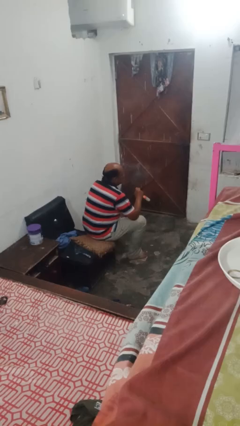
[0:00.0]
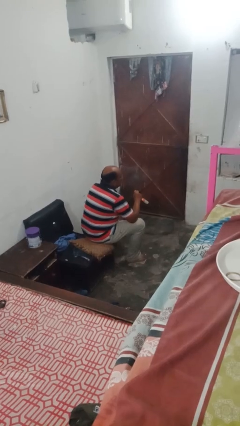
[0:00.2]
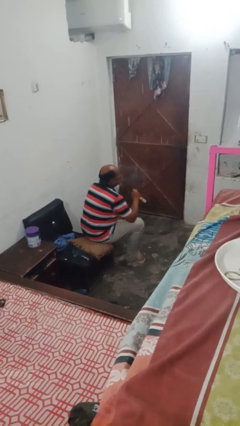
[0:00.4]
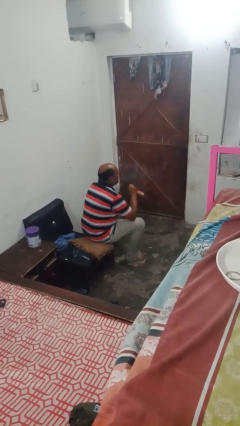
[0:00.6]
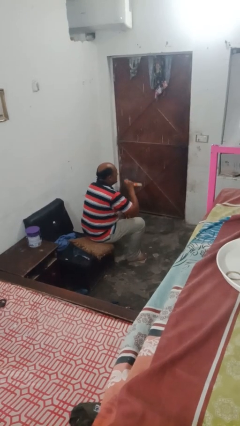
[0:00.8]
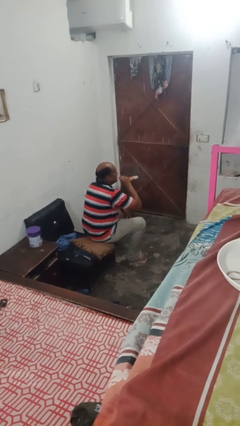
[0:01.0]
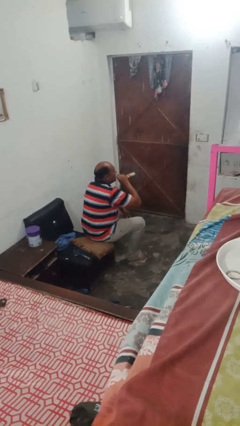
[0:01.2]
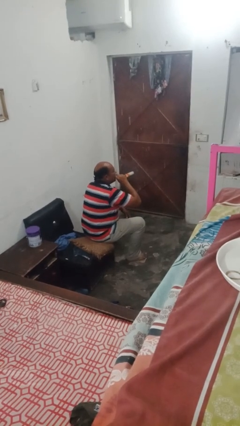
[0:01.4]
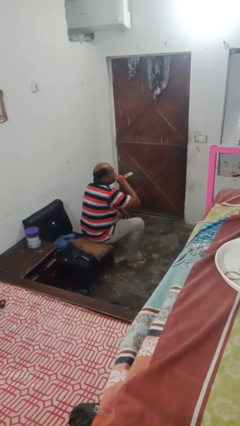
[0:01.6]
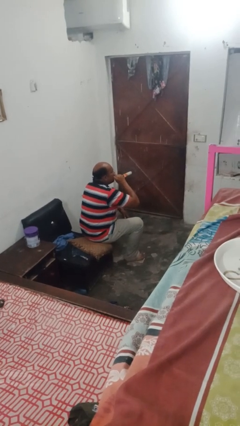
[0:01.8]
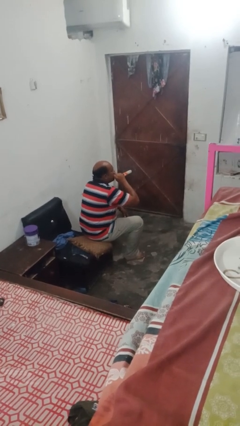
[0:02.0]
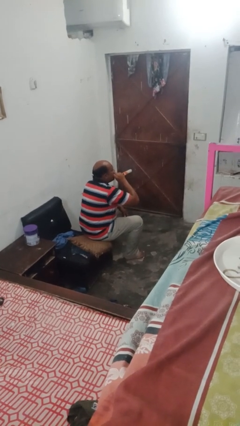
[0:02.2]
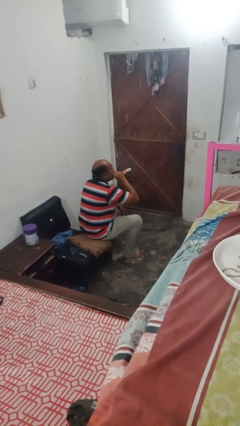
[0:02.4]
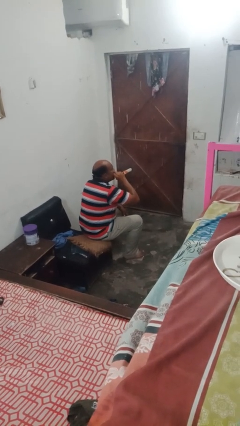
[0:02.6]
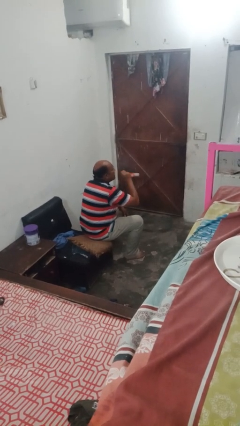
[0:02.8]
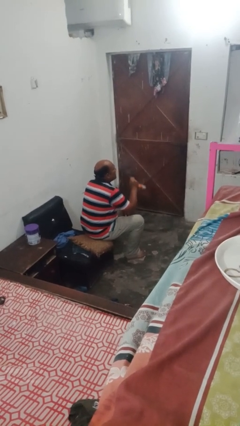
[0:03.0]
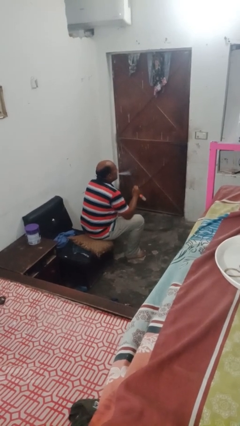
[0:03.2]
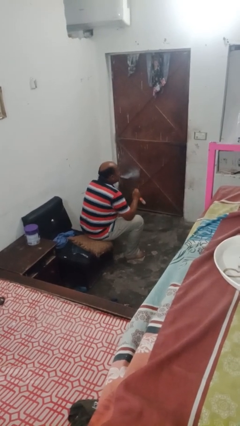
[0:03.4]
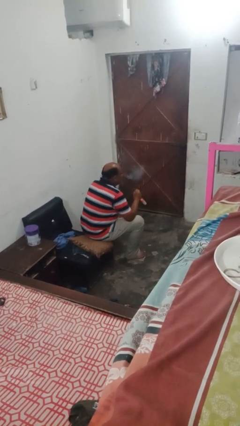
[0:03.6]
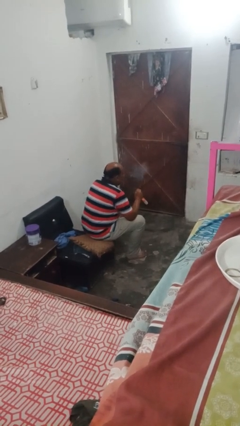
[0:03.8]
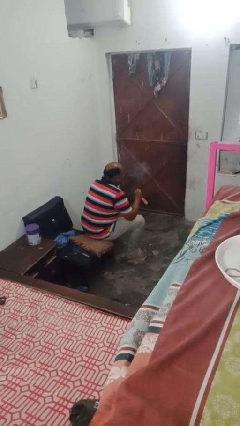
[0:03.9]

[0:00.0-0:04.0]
person vapes

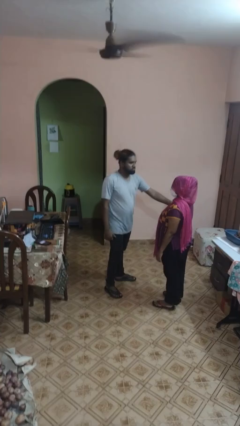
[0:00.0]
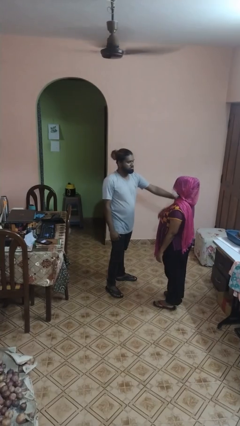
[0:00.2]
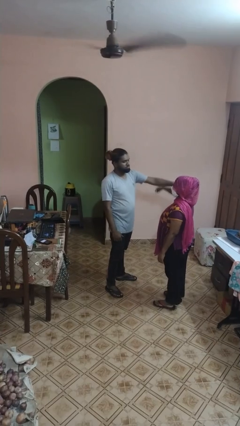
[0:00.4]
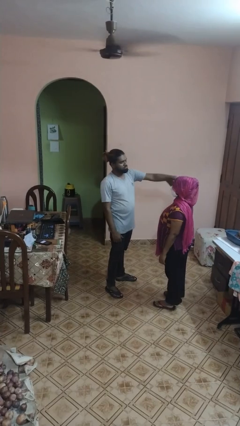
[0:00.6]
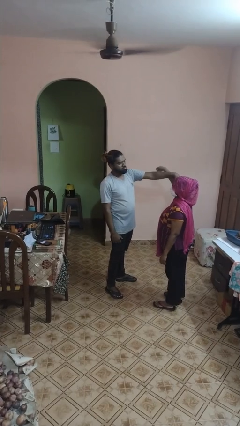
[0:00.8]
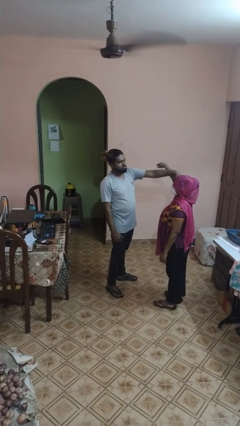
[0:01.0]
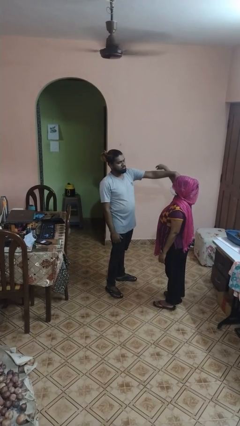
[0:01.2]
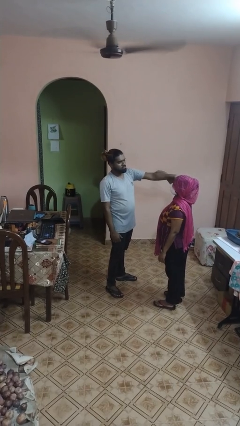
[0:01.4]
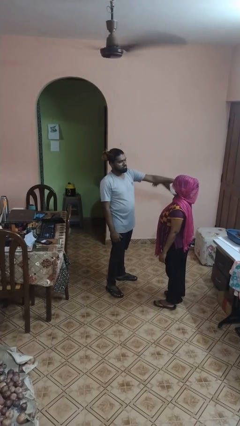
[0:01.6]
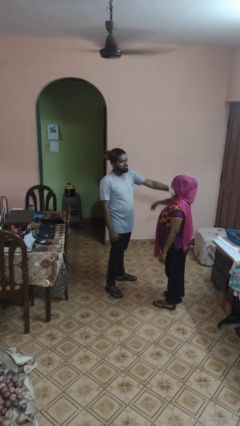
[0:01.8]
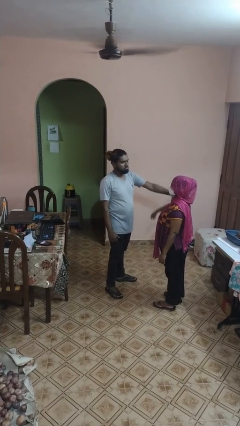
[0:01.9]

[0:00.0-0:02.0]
person grabs person by bicep

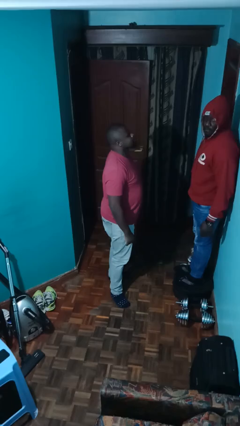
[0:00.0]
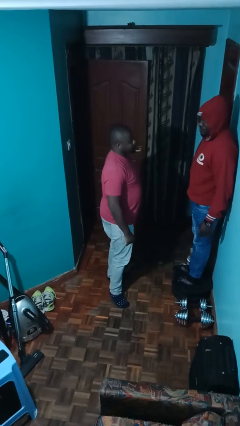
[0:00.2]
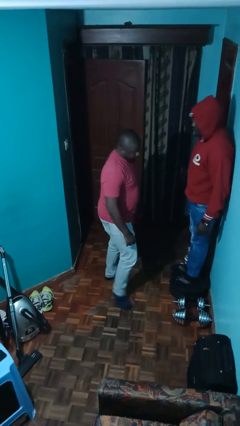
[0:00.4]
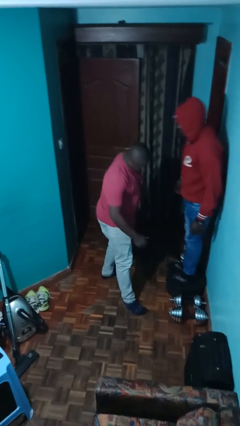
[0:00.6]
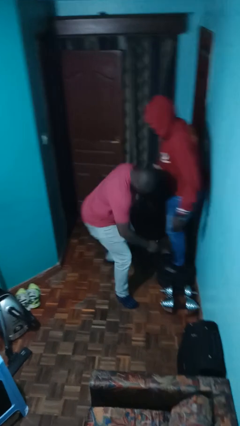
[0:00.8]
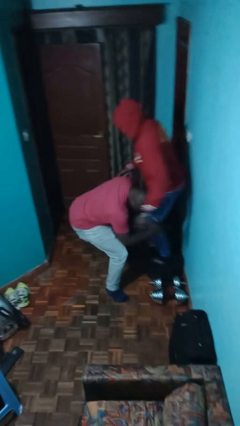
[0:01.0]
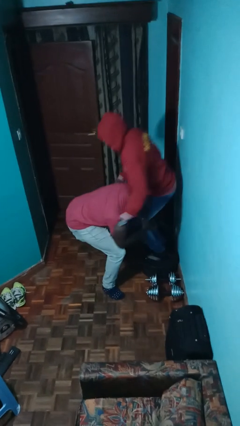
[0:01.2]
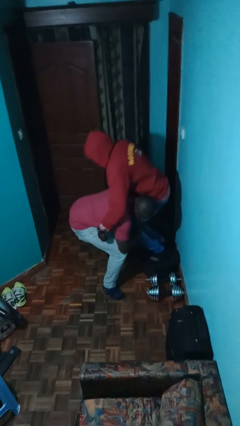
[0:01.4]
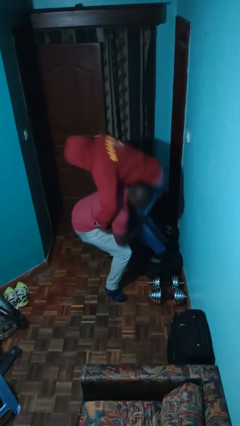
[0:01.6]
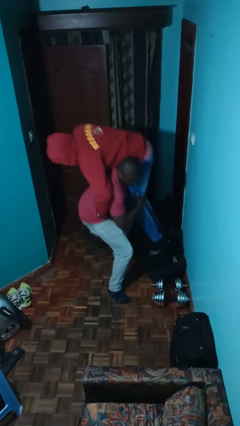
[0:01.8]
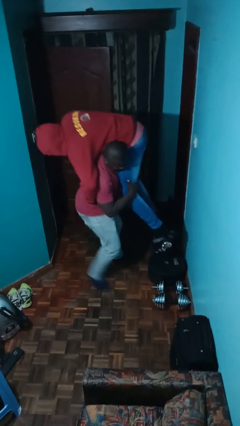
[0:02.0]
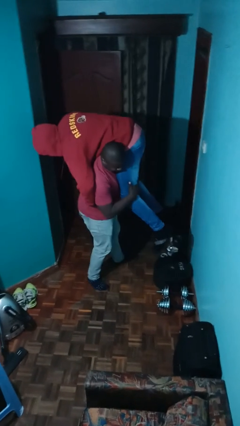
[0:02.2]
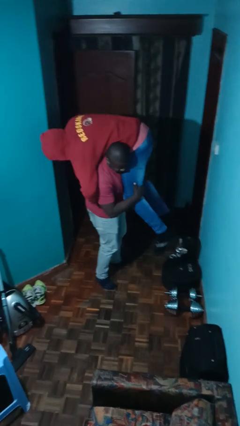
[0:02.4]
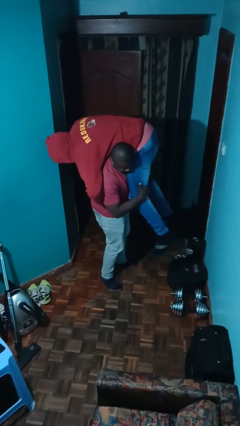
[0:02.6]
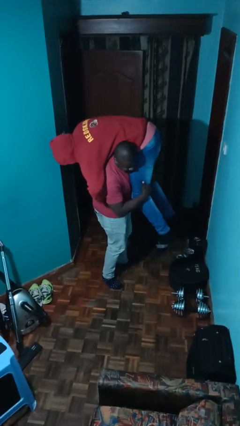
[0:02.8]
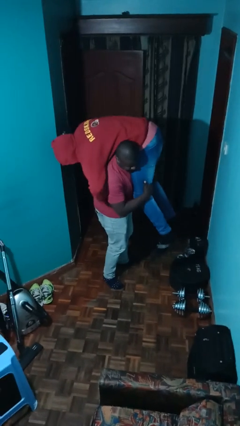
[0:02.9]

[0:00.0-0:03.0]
person carries person over shoulder

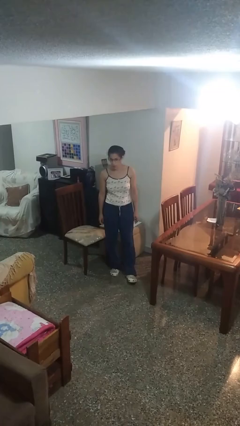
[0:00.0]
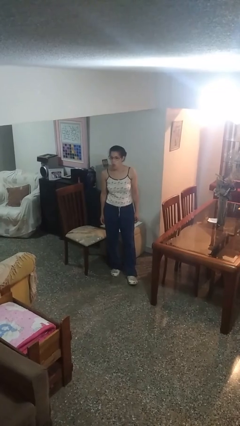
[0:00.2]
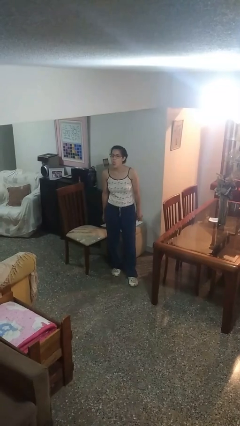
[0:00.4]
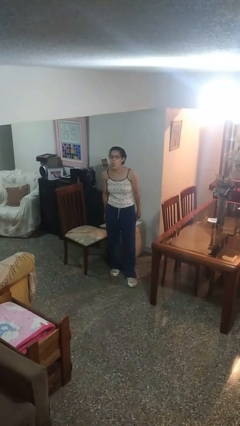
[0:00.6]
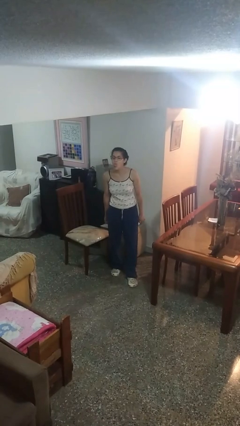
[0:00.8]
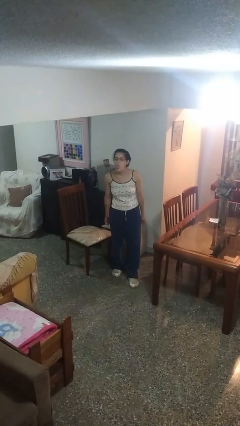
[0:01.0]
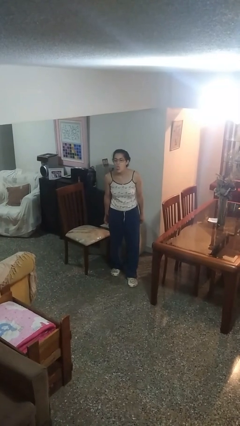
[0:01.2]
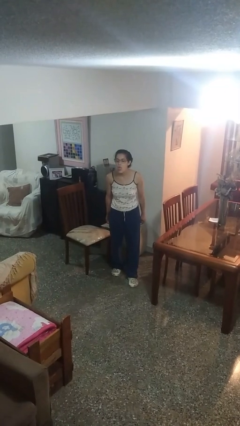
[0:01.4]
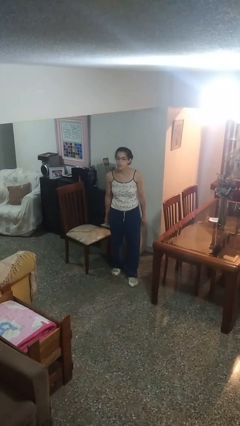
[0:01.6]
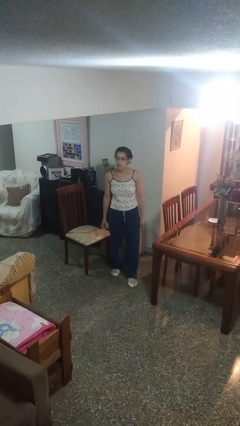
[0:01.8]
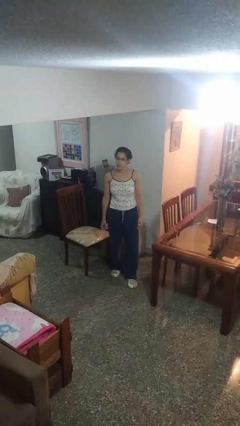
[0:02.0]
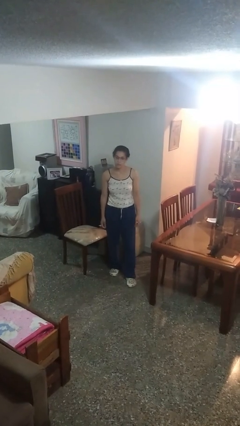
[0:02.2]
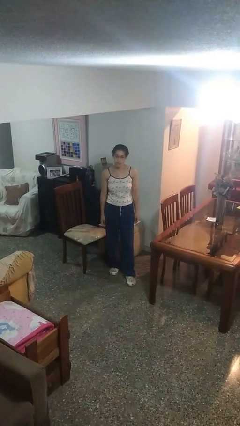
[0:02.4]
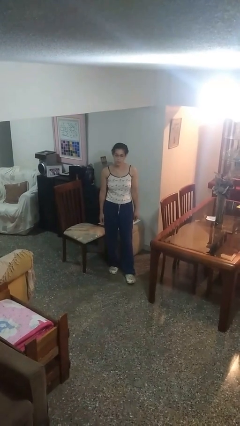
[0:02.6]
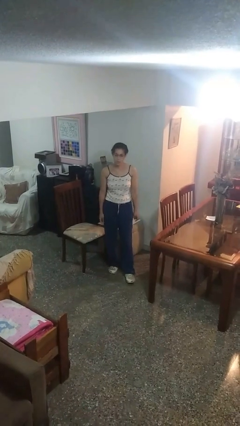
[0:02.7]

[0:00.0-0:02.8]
person sticks out tongue

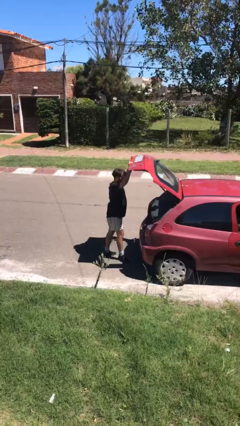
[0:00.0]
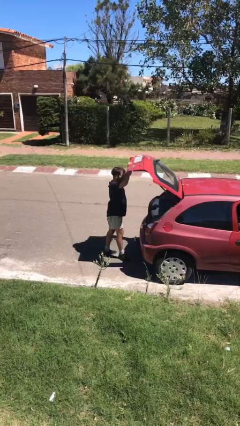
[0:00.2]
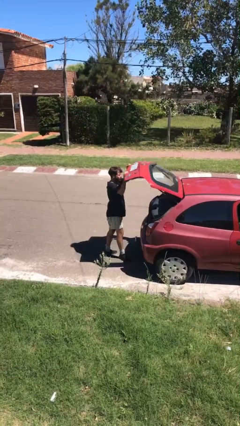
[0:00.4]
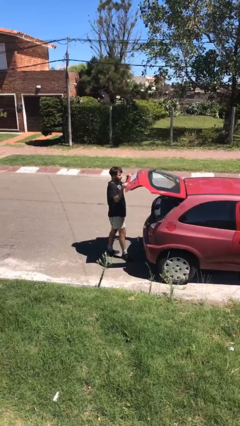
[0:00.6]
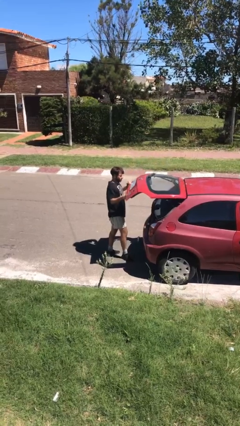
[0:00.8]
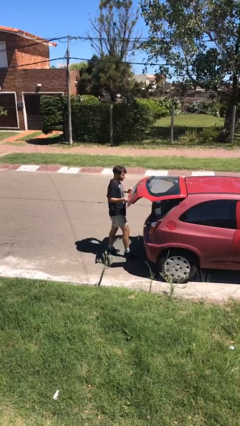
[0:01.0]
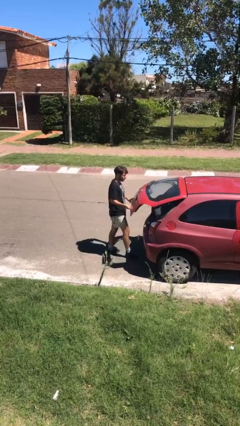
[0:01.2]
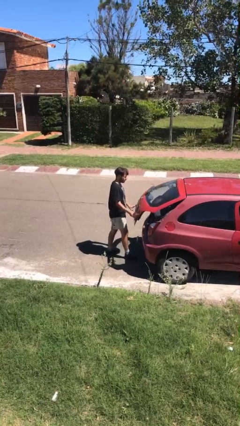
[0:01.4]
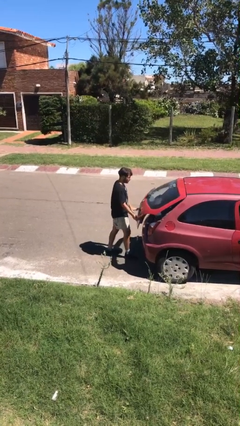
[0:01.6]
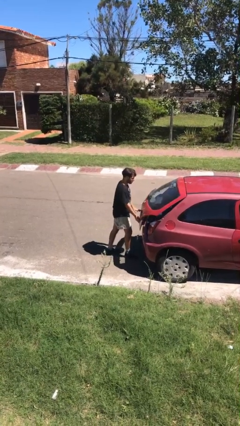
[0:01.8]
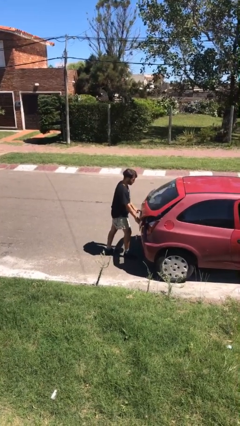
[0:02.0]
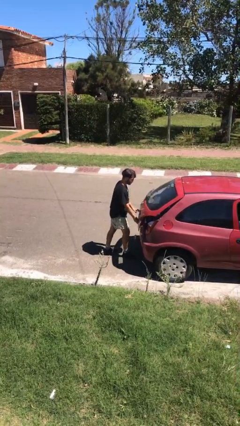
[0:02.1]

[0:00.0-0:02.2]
person closes car trunk

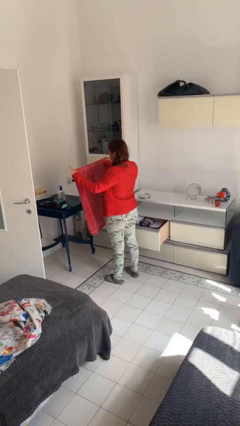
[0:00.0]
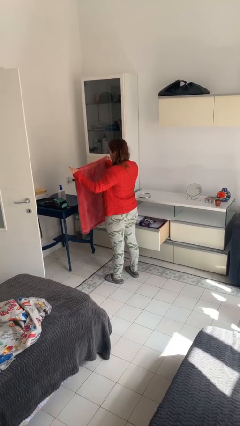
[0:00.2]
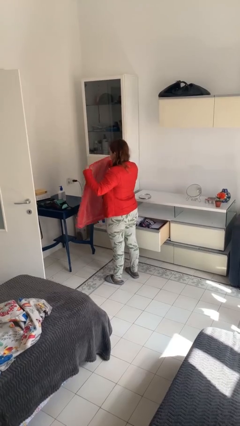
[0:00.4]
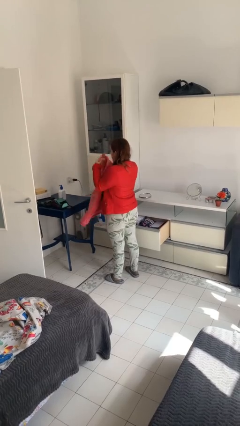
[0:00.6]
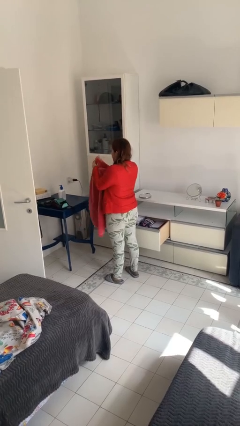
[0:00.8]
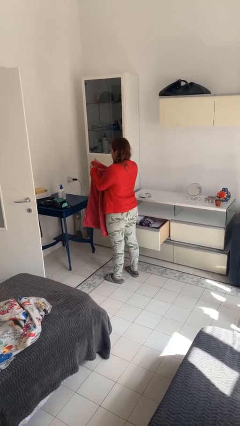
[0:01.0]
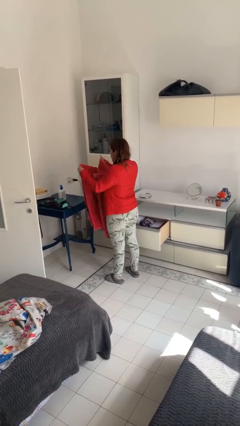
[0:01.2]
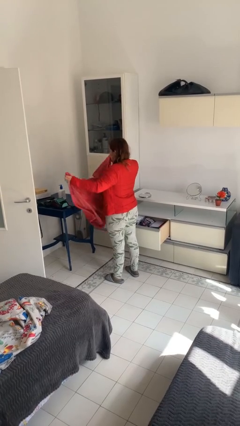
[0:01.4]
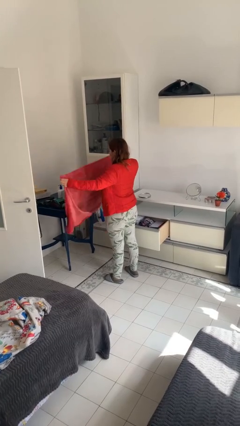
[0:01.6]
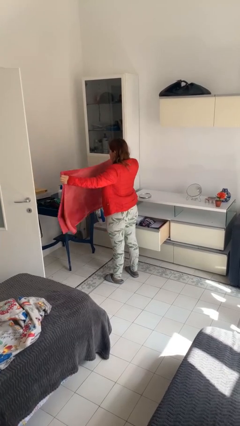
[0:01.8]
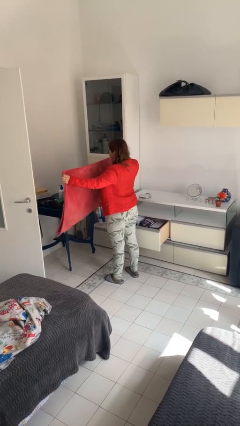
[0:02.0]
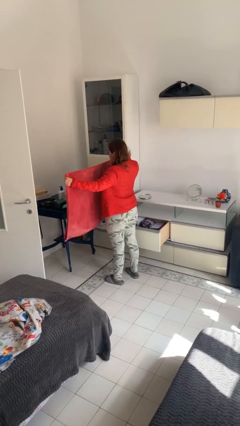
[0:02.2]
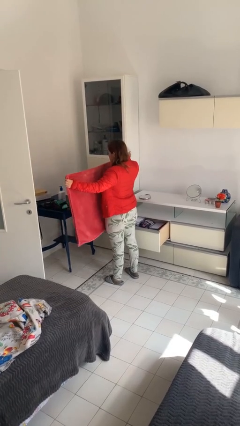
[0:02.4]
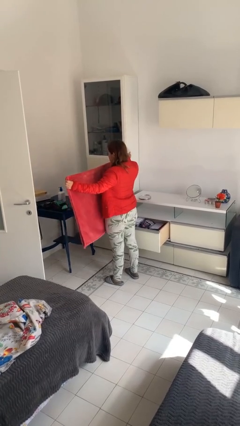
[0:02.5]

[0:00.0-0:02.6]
person unfolds blanket

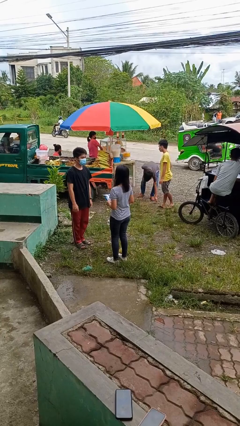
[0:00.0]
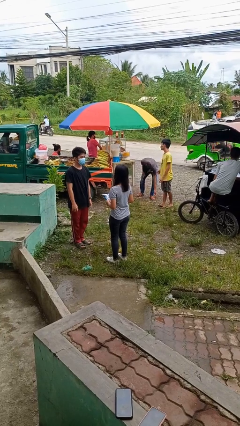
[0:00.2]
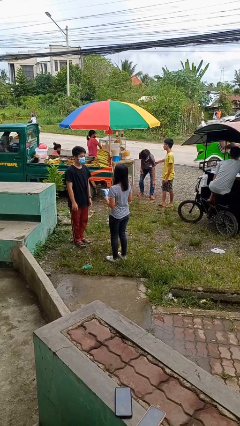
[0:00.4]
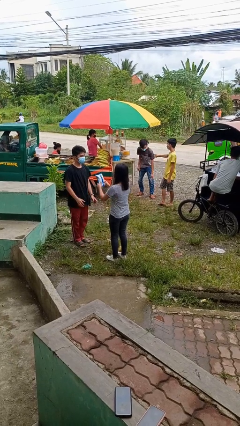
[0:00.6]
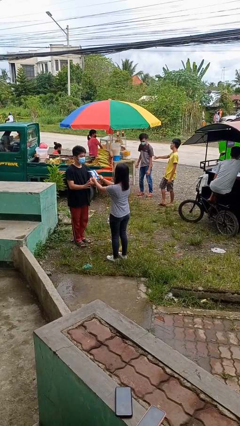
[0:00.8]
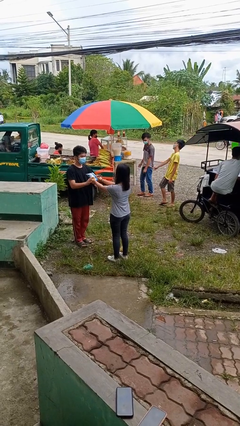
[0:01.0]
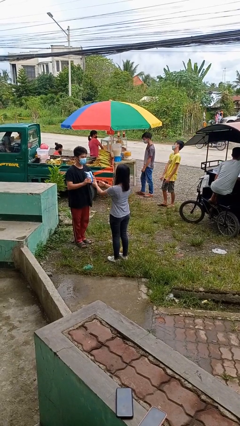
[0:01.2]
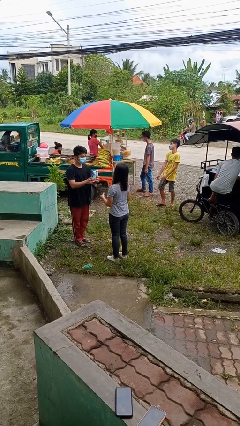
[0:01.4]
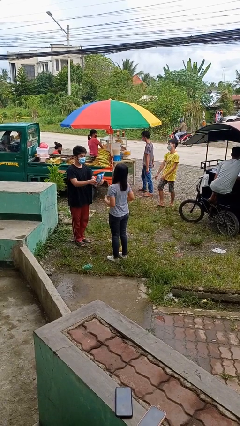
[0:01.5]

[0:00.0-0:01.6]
person transfers object to person
